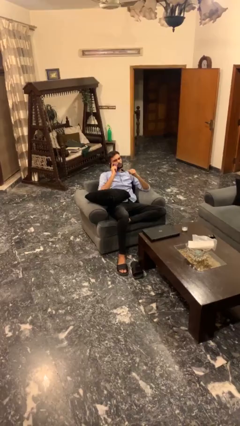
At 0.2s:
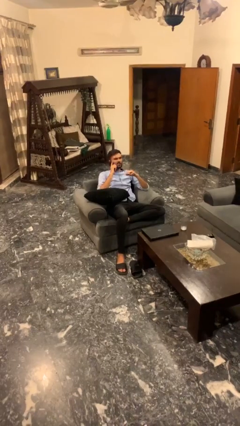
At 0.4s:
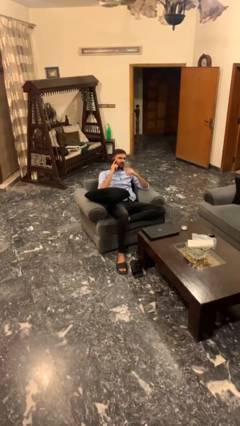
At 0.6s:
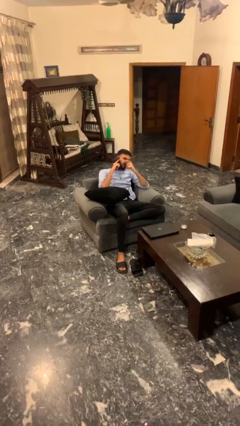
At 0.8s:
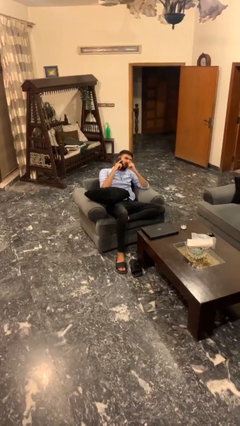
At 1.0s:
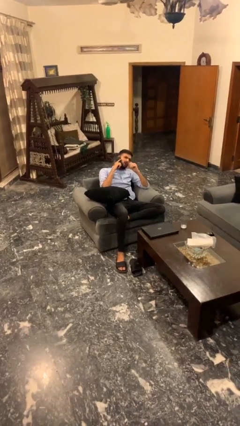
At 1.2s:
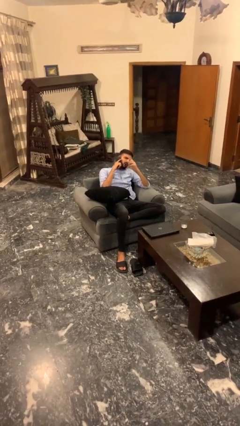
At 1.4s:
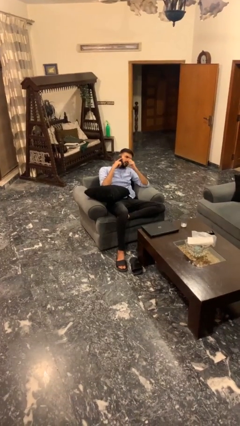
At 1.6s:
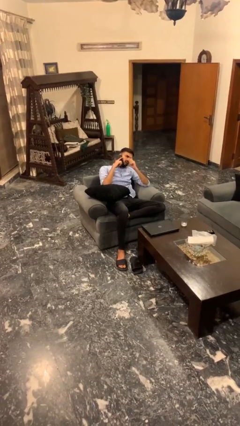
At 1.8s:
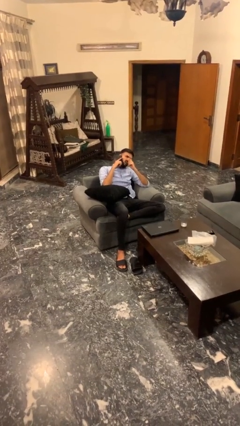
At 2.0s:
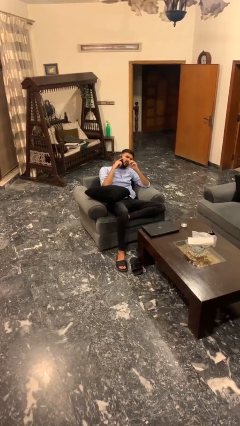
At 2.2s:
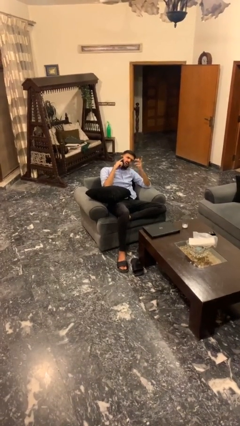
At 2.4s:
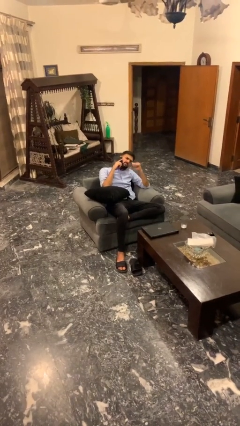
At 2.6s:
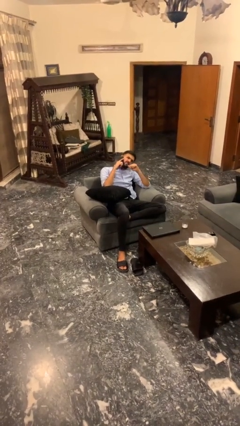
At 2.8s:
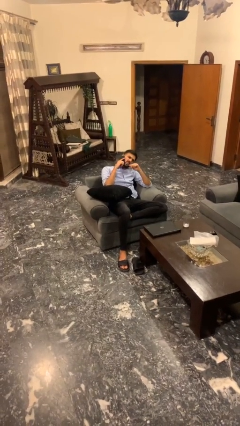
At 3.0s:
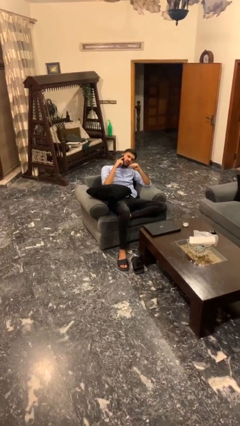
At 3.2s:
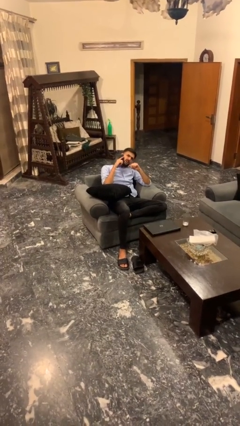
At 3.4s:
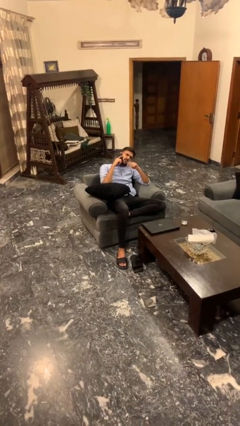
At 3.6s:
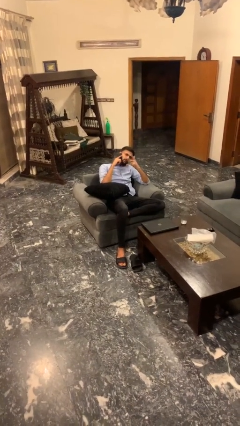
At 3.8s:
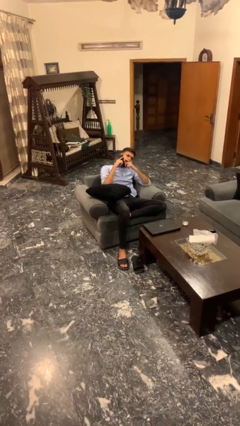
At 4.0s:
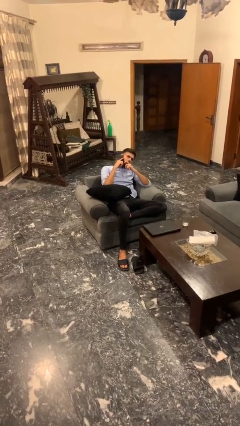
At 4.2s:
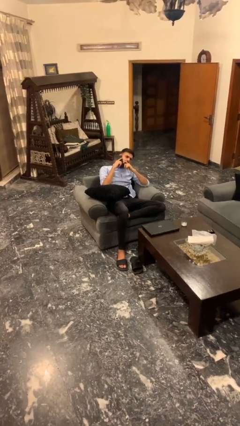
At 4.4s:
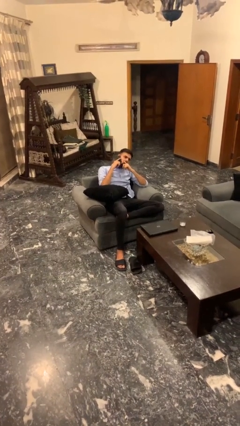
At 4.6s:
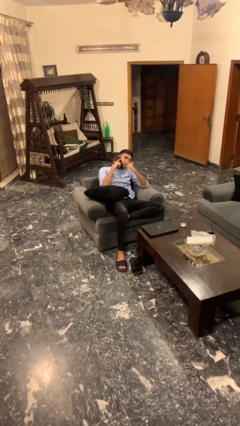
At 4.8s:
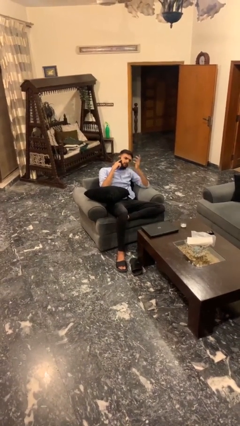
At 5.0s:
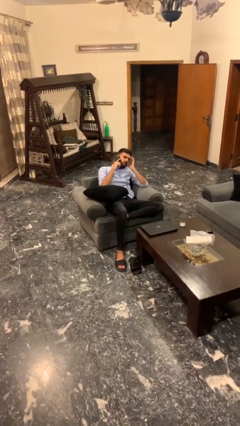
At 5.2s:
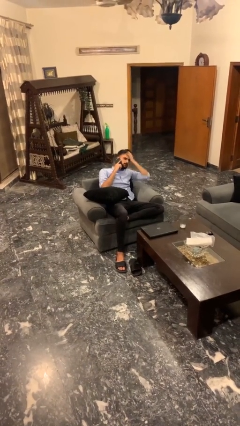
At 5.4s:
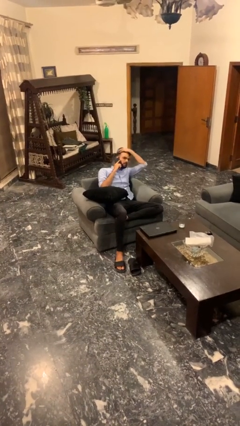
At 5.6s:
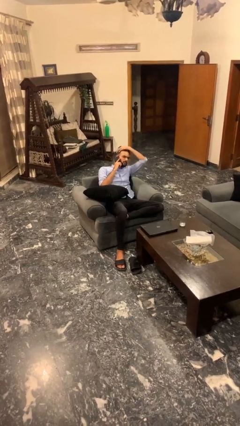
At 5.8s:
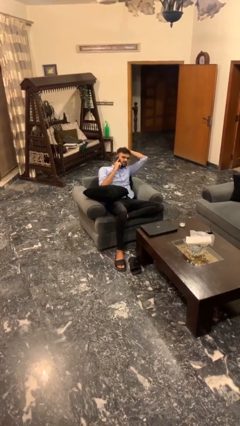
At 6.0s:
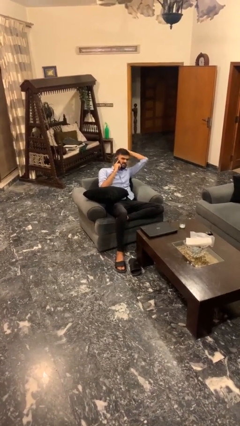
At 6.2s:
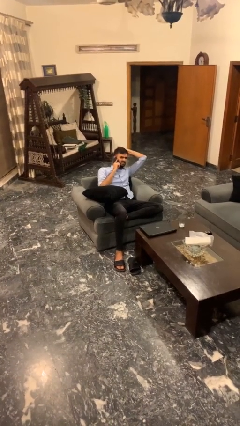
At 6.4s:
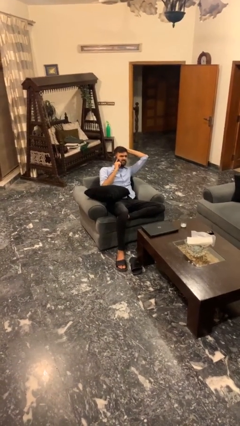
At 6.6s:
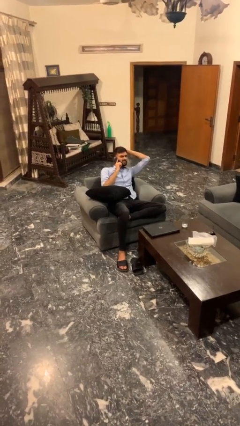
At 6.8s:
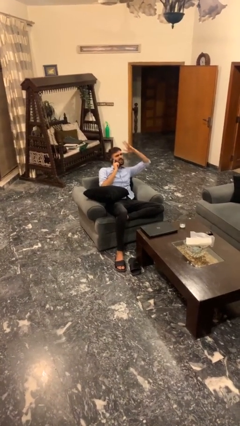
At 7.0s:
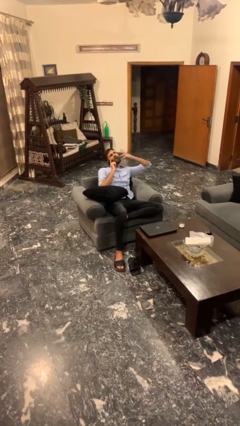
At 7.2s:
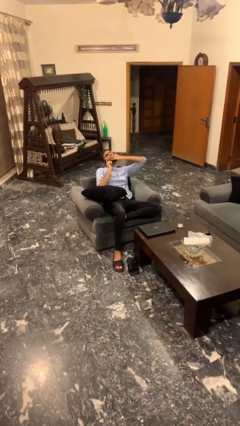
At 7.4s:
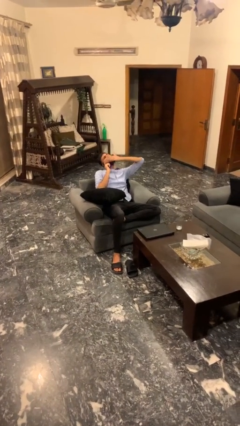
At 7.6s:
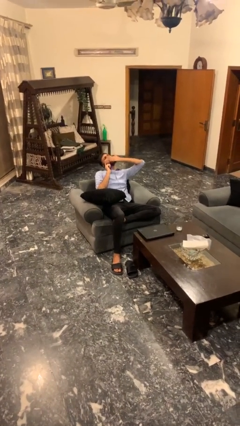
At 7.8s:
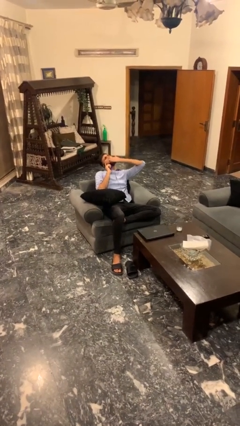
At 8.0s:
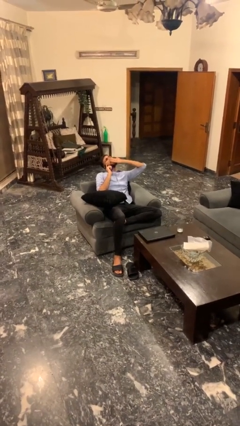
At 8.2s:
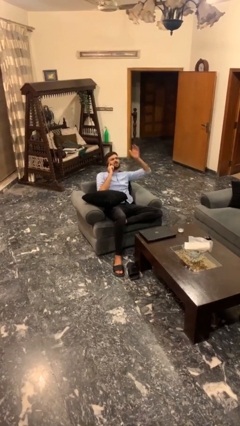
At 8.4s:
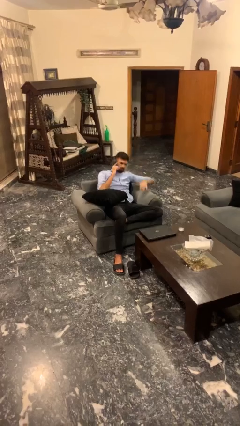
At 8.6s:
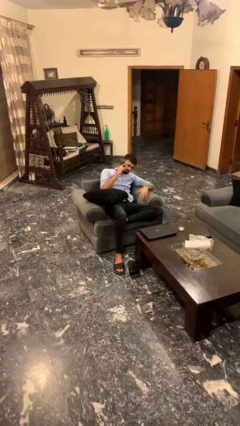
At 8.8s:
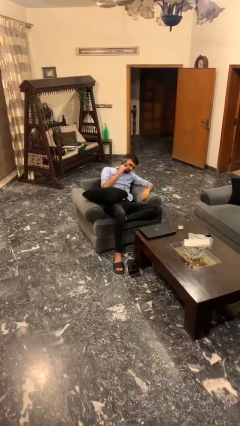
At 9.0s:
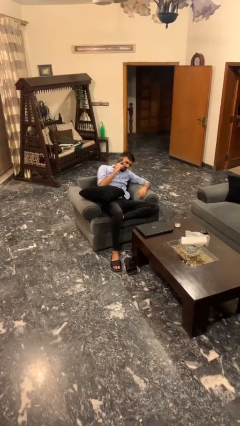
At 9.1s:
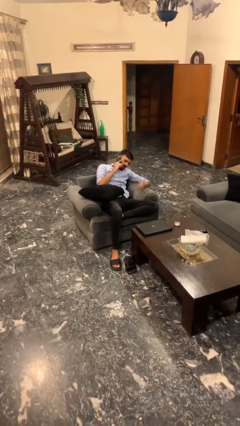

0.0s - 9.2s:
person talks on phone

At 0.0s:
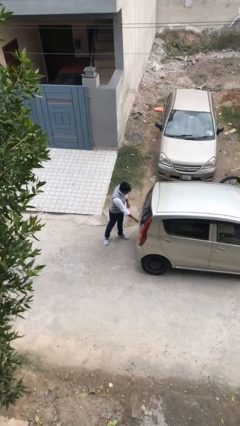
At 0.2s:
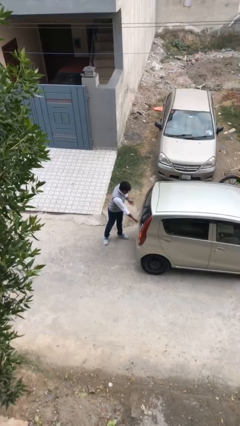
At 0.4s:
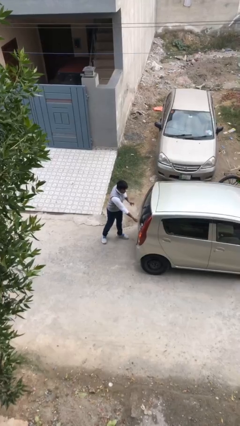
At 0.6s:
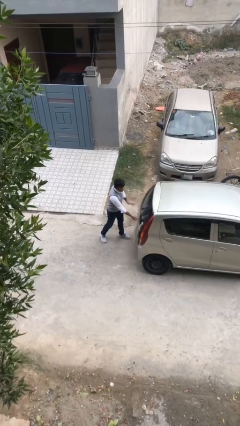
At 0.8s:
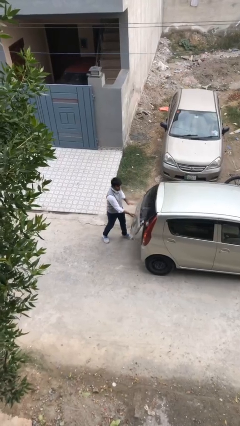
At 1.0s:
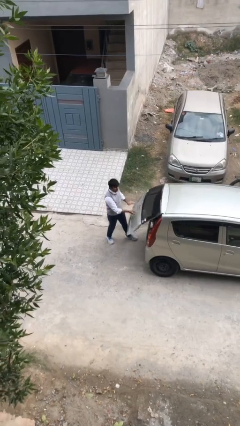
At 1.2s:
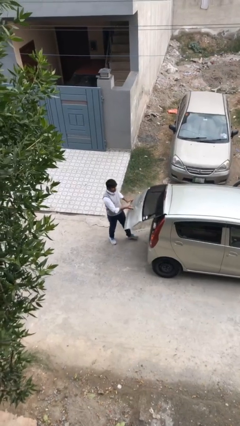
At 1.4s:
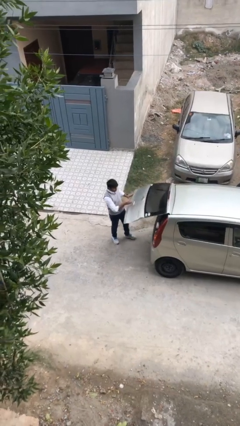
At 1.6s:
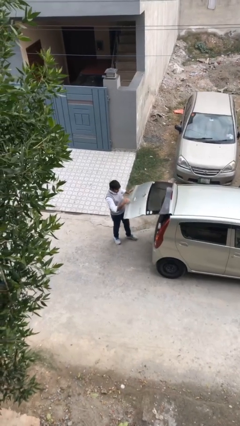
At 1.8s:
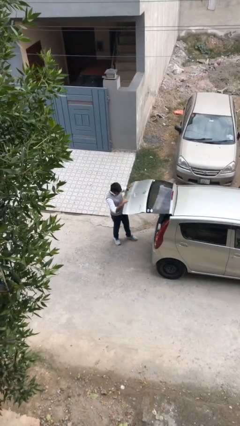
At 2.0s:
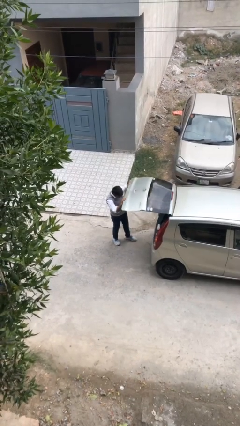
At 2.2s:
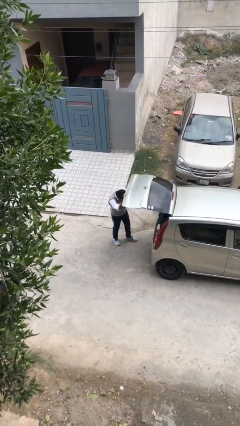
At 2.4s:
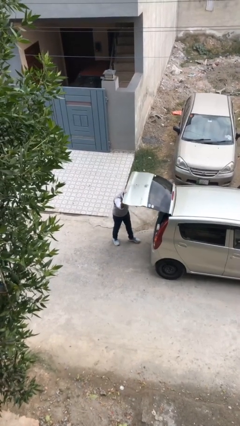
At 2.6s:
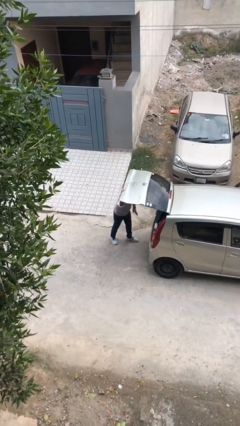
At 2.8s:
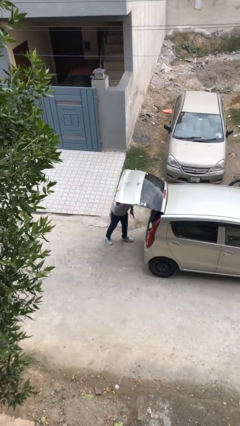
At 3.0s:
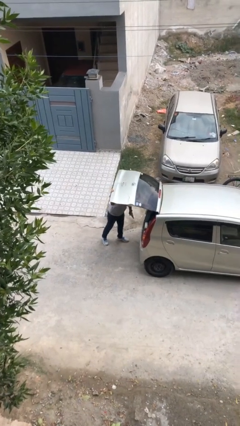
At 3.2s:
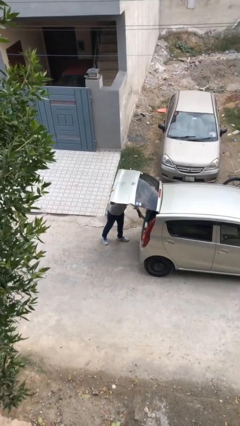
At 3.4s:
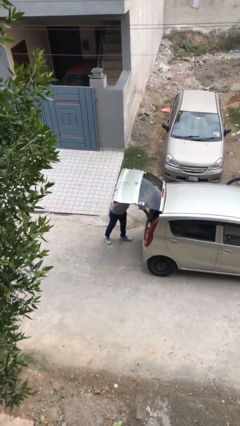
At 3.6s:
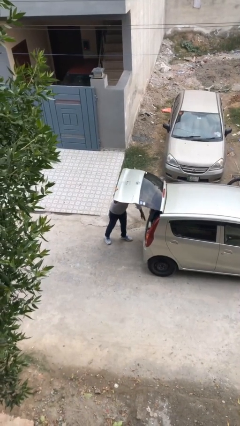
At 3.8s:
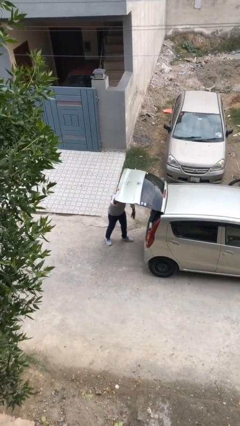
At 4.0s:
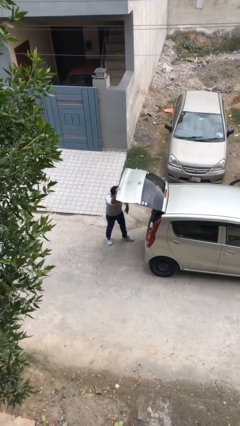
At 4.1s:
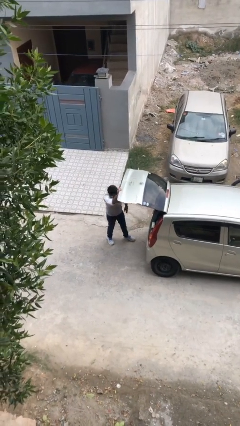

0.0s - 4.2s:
person opens car trunk

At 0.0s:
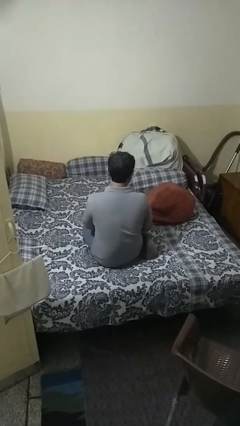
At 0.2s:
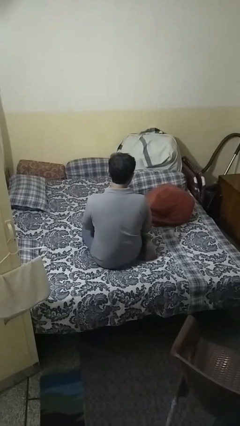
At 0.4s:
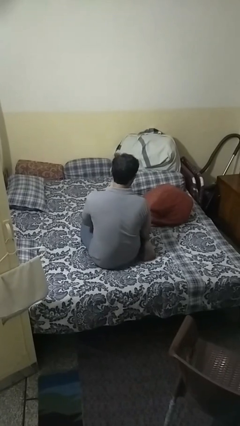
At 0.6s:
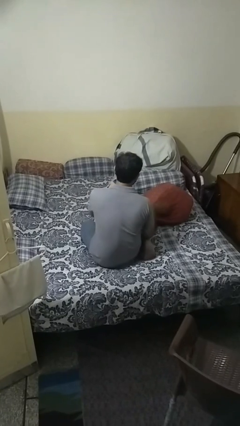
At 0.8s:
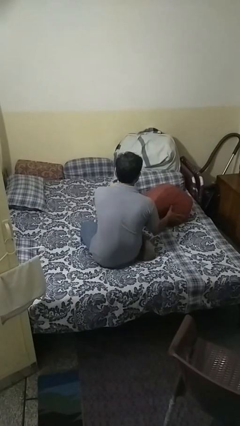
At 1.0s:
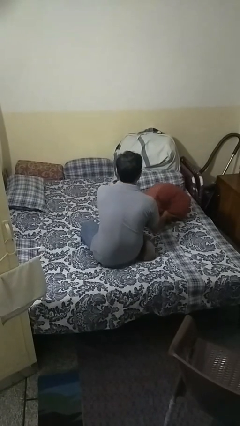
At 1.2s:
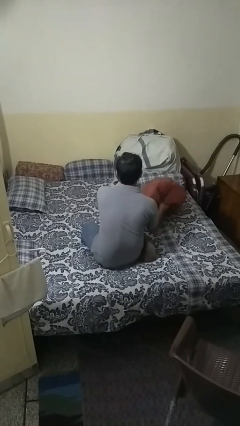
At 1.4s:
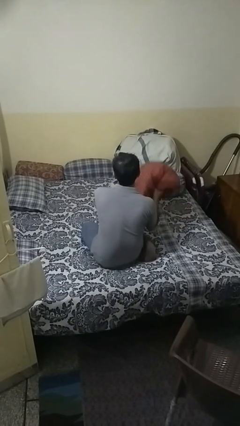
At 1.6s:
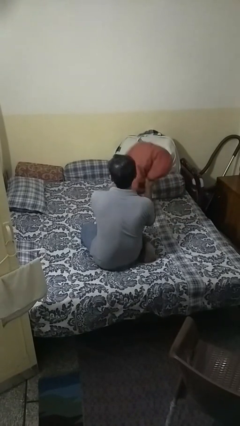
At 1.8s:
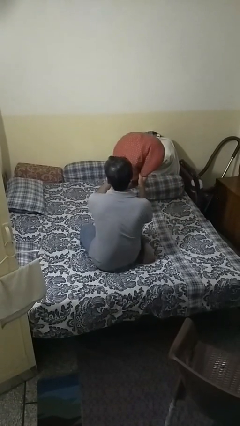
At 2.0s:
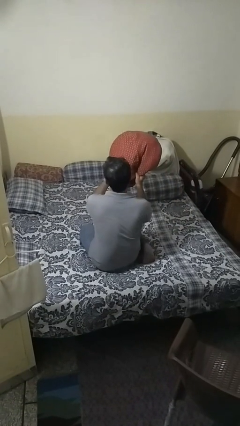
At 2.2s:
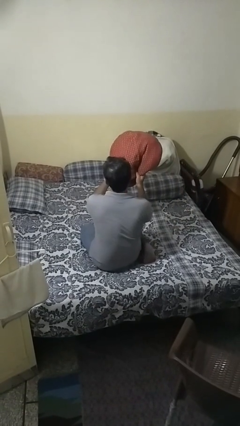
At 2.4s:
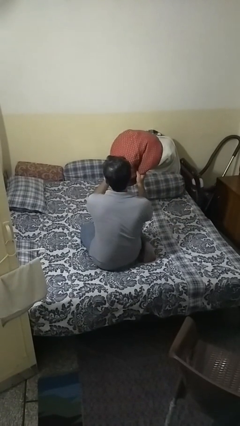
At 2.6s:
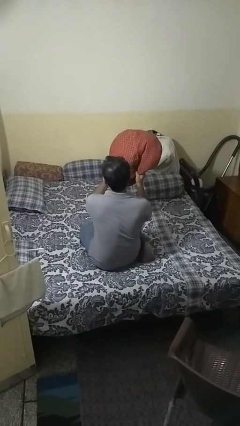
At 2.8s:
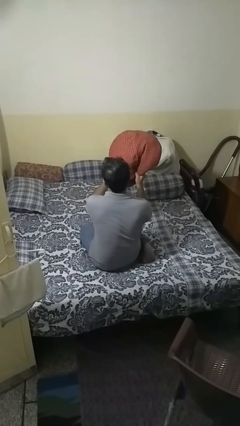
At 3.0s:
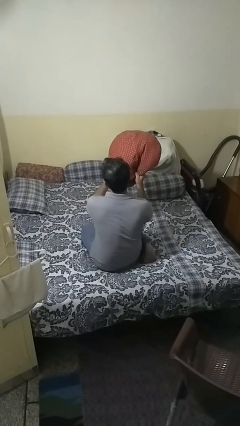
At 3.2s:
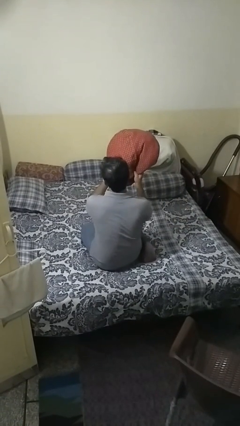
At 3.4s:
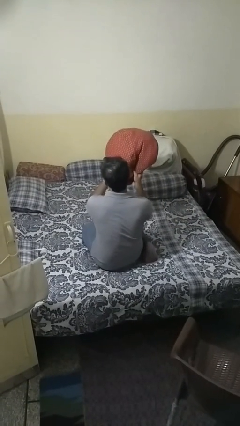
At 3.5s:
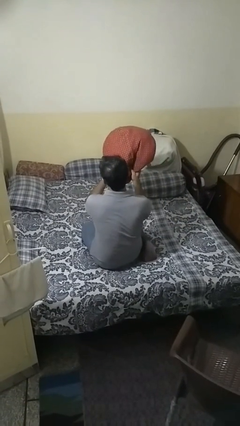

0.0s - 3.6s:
person picks up object from bed

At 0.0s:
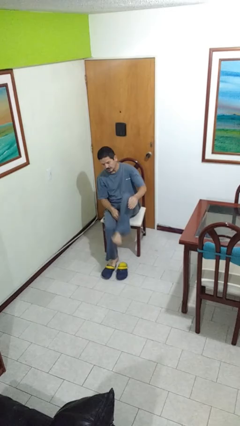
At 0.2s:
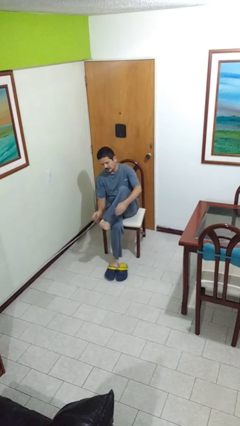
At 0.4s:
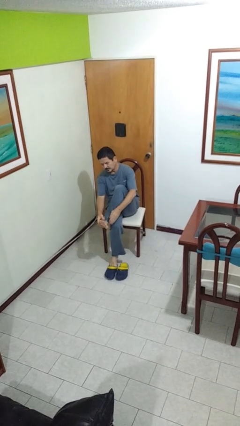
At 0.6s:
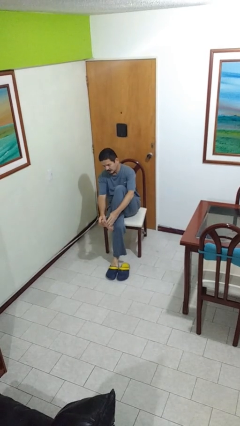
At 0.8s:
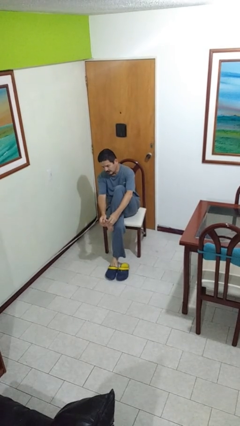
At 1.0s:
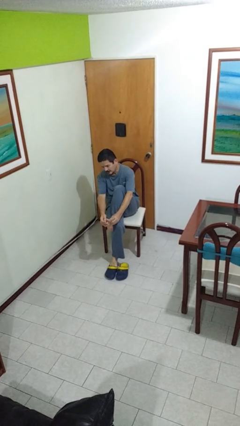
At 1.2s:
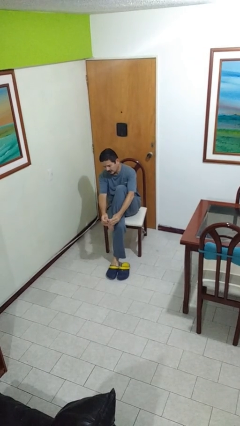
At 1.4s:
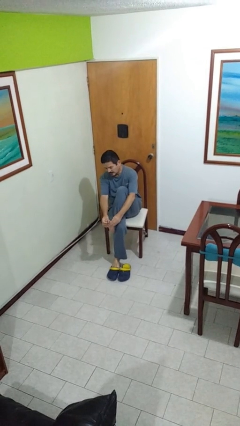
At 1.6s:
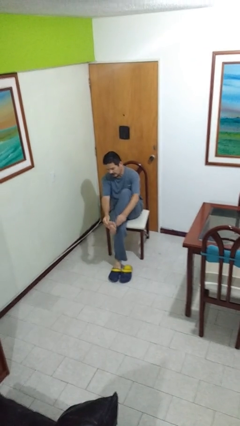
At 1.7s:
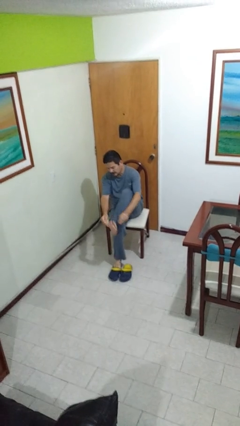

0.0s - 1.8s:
person rubs foot
